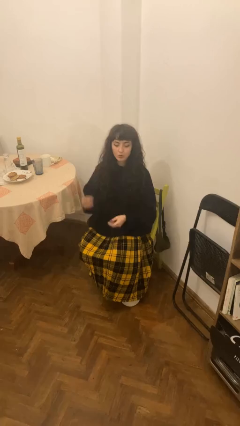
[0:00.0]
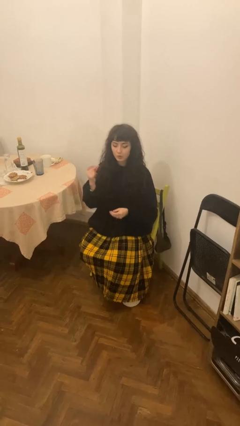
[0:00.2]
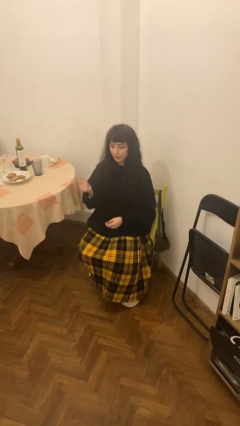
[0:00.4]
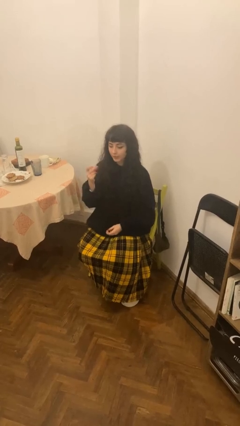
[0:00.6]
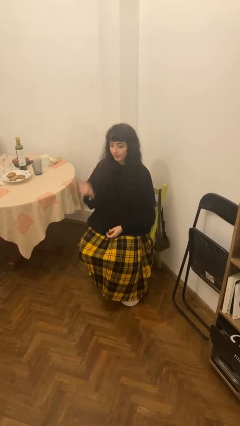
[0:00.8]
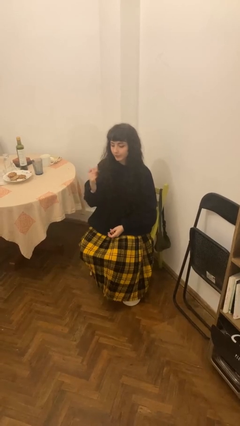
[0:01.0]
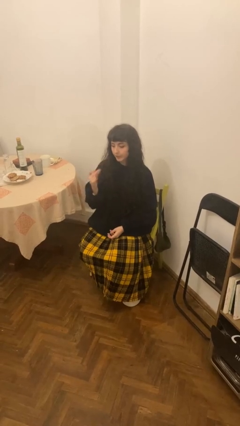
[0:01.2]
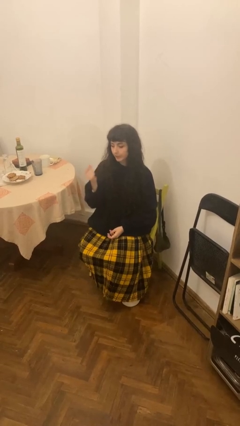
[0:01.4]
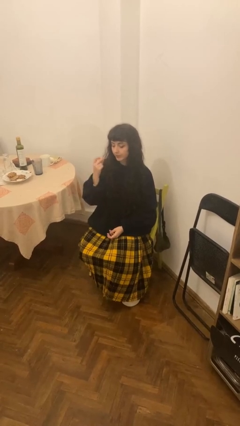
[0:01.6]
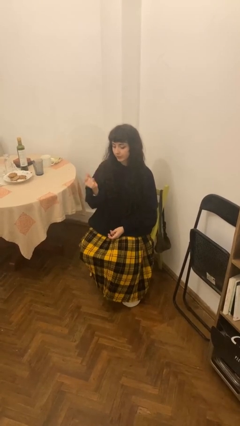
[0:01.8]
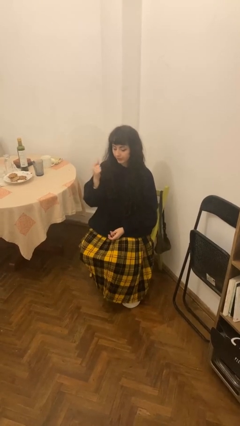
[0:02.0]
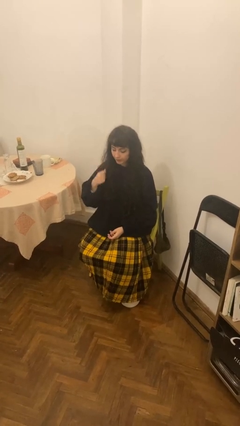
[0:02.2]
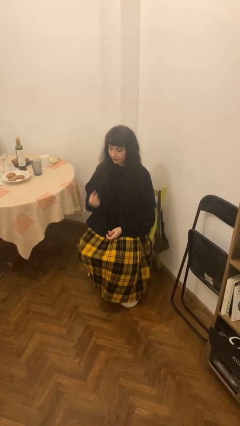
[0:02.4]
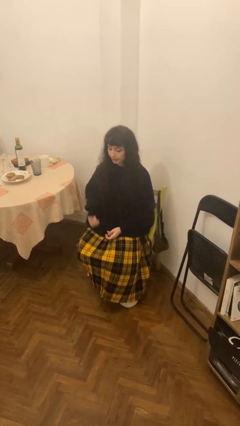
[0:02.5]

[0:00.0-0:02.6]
person snaps fingers

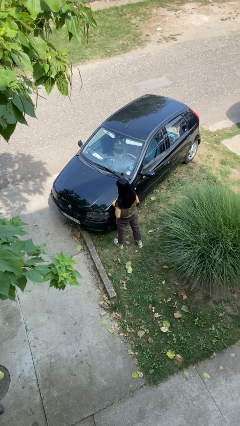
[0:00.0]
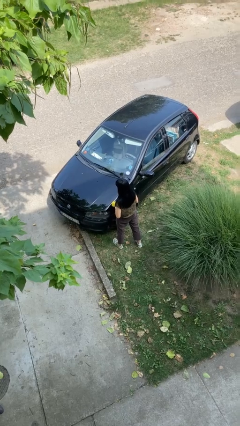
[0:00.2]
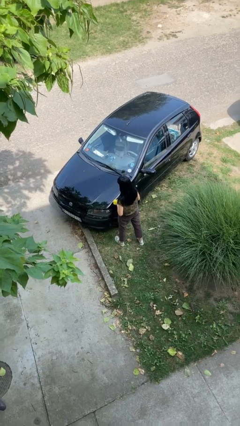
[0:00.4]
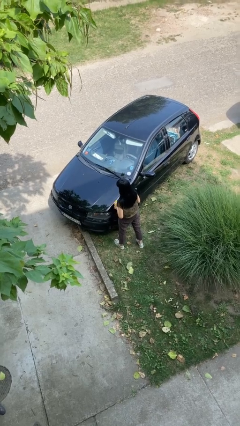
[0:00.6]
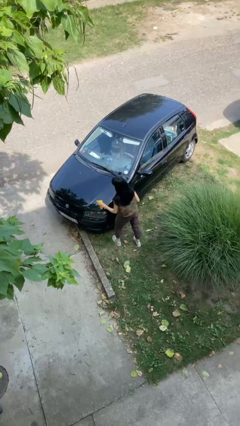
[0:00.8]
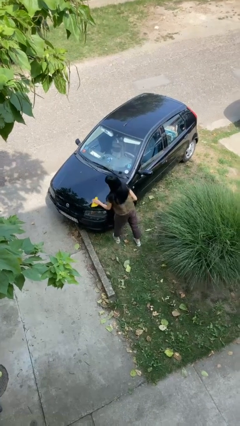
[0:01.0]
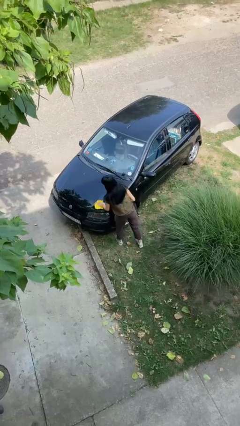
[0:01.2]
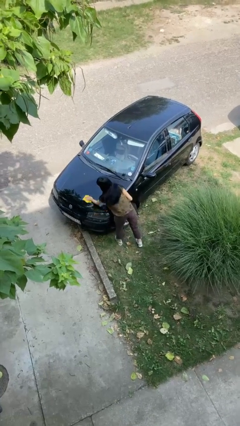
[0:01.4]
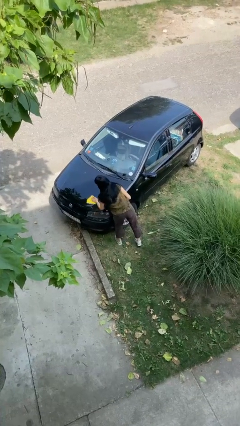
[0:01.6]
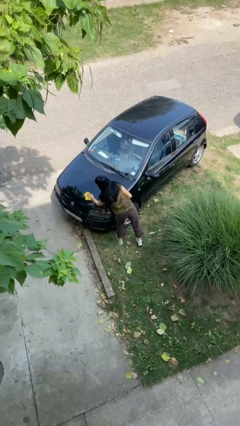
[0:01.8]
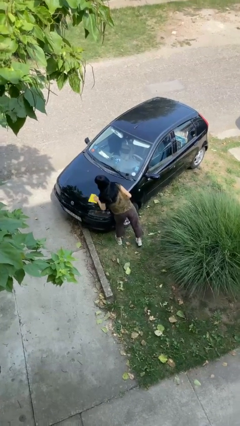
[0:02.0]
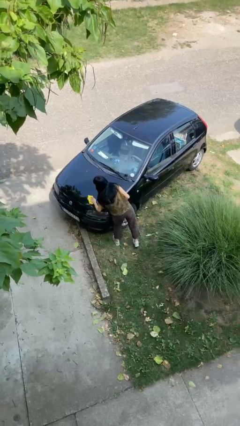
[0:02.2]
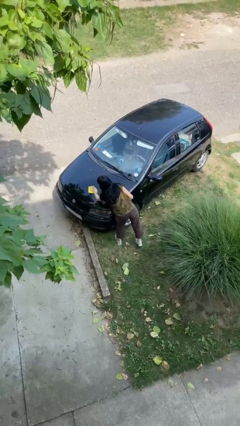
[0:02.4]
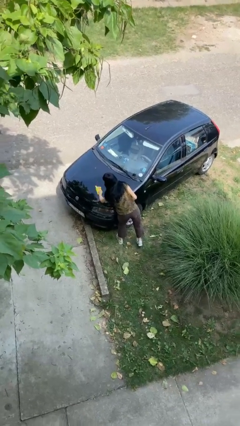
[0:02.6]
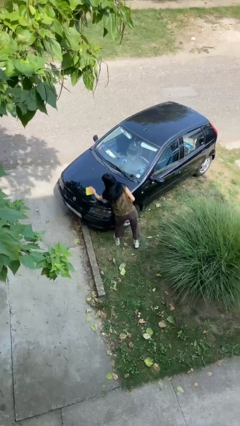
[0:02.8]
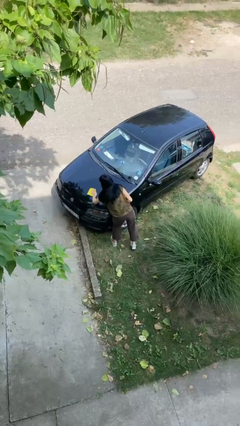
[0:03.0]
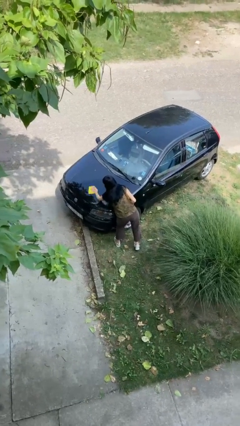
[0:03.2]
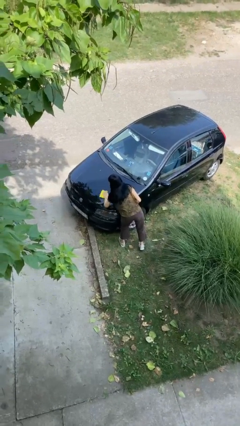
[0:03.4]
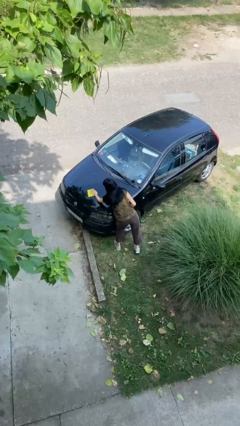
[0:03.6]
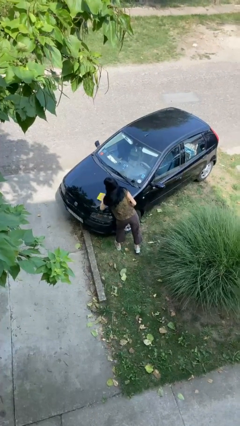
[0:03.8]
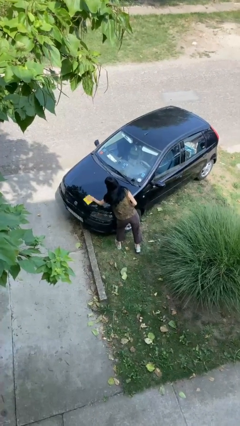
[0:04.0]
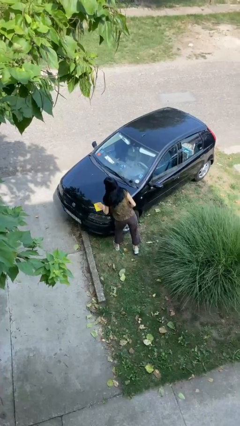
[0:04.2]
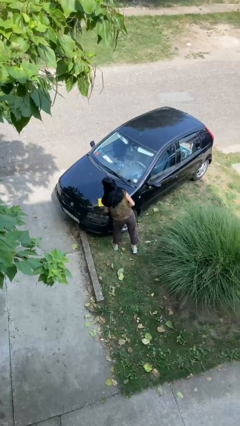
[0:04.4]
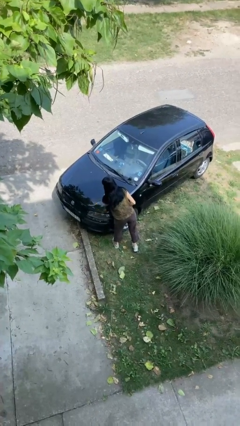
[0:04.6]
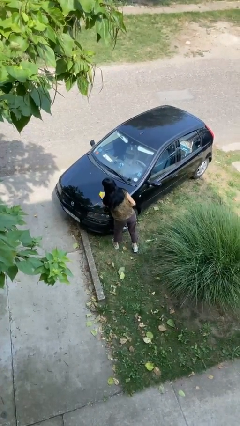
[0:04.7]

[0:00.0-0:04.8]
person polishes car with rag

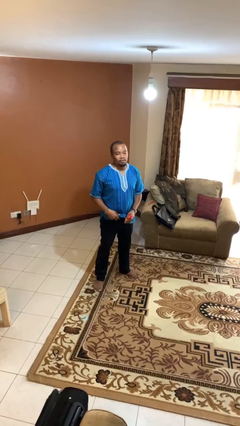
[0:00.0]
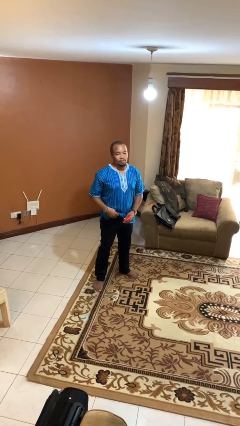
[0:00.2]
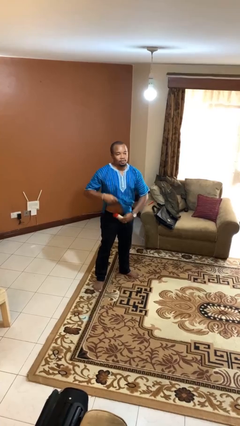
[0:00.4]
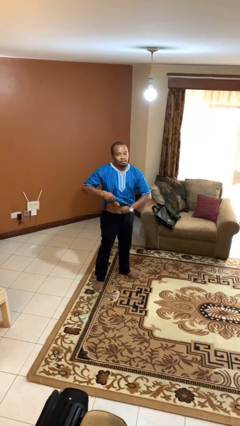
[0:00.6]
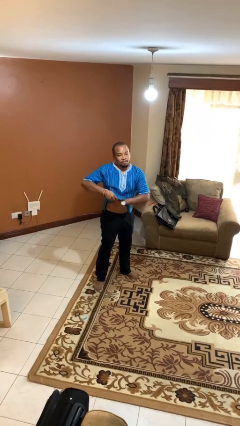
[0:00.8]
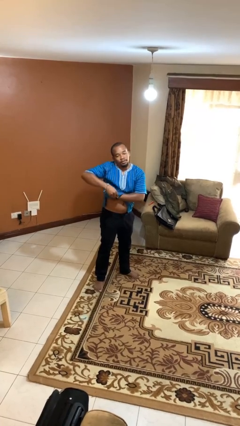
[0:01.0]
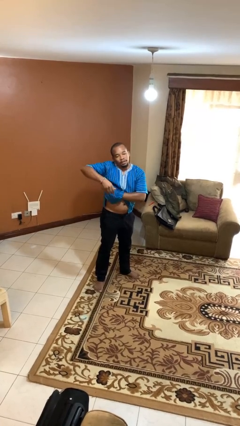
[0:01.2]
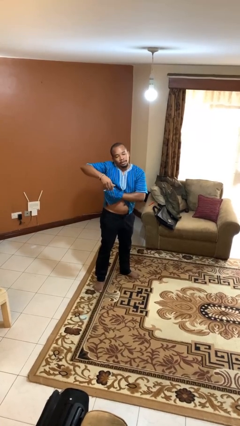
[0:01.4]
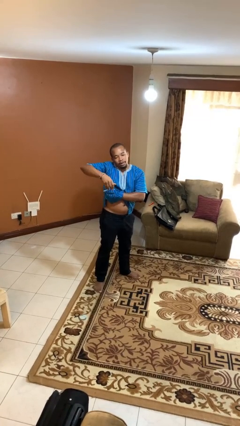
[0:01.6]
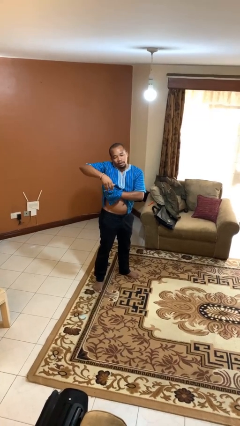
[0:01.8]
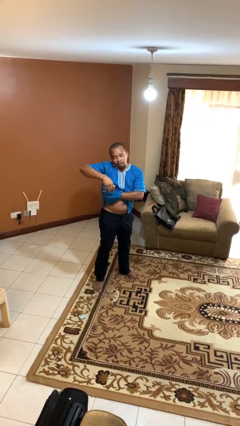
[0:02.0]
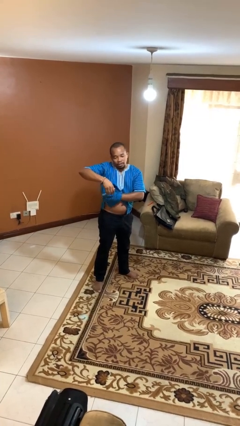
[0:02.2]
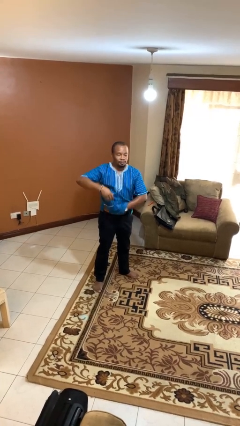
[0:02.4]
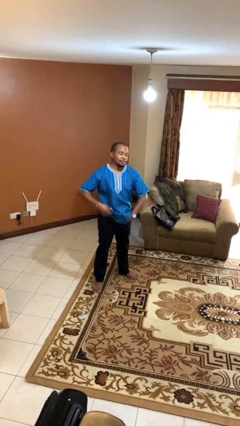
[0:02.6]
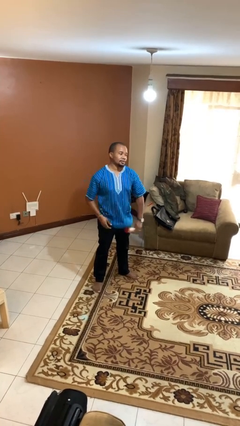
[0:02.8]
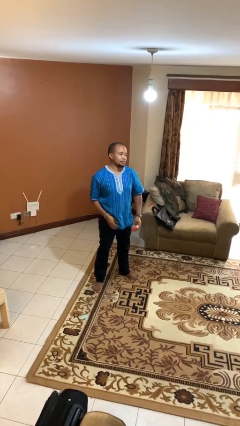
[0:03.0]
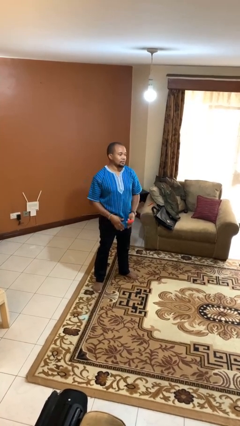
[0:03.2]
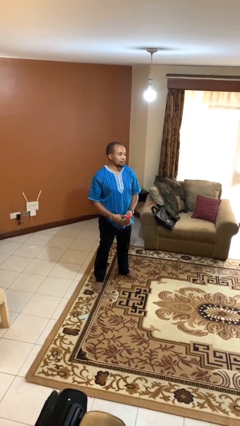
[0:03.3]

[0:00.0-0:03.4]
person applies deodorant

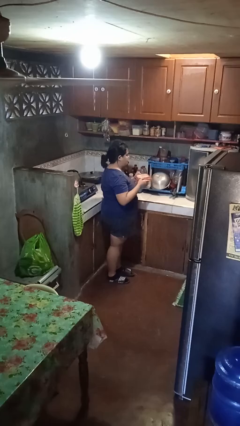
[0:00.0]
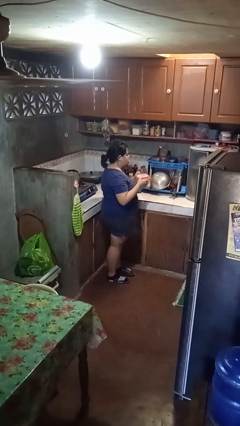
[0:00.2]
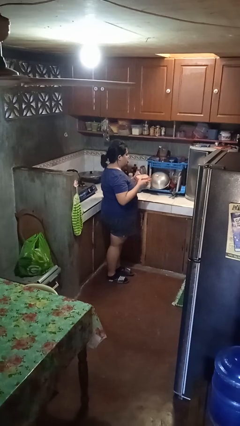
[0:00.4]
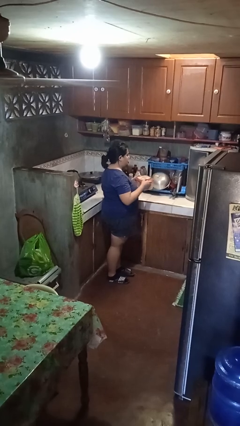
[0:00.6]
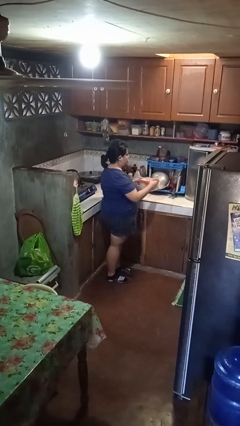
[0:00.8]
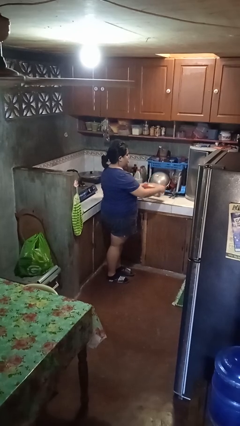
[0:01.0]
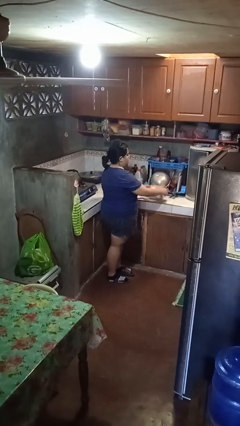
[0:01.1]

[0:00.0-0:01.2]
person puts down object on countertop

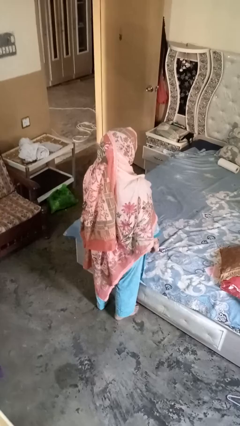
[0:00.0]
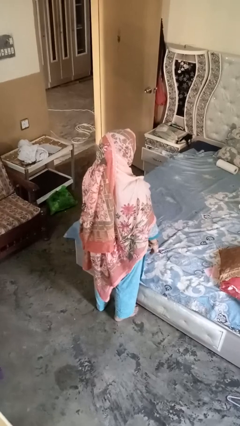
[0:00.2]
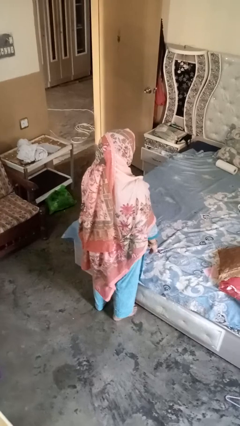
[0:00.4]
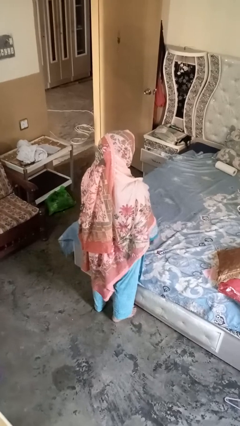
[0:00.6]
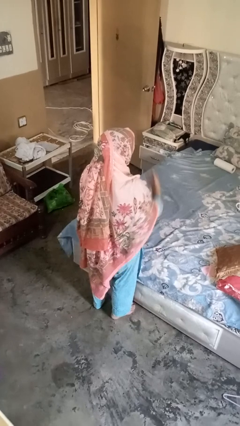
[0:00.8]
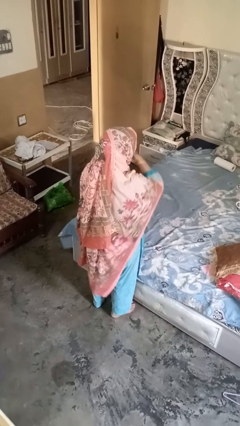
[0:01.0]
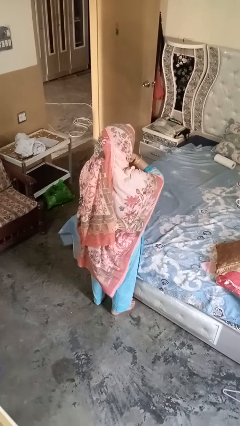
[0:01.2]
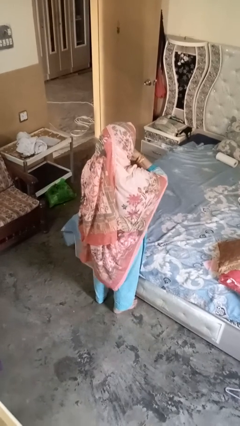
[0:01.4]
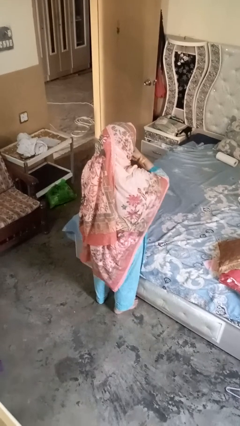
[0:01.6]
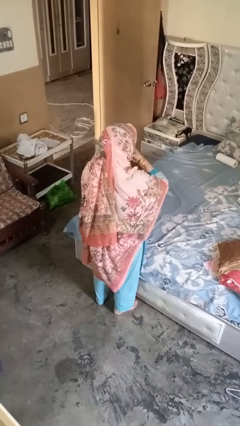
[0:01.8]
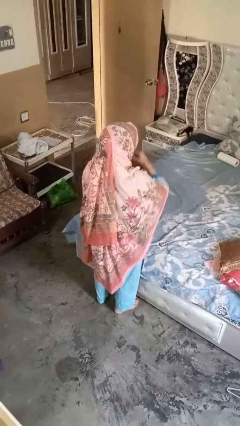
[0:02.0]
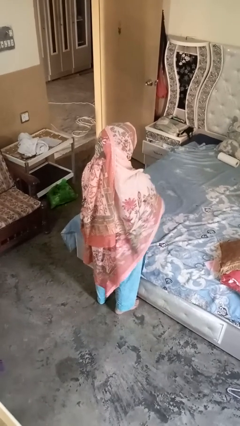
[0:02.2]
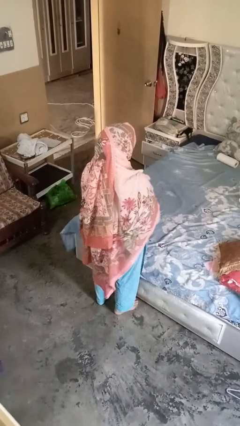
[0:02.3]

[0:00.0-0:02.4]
person strokes chin

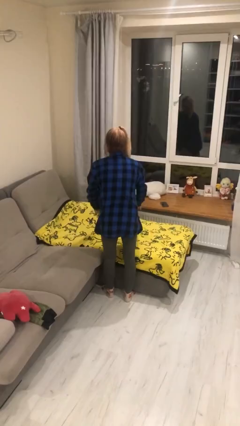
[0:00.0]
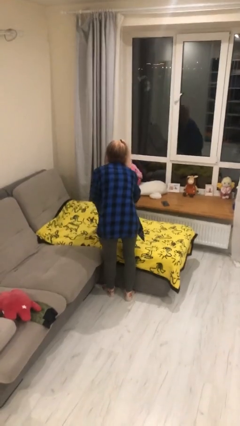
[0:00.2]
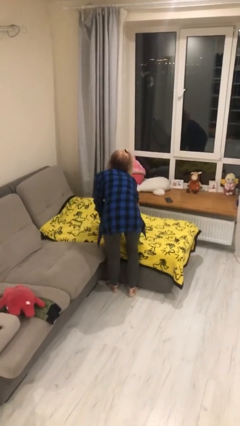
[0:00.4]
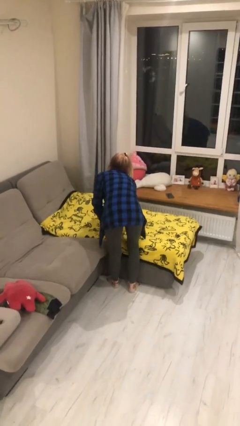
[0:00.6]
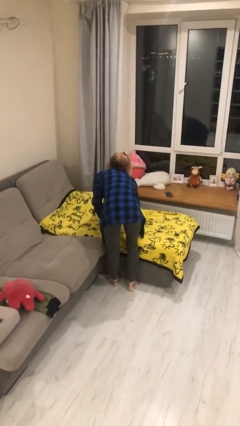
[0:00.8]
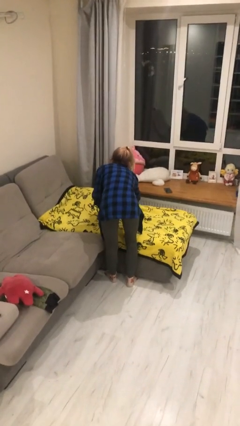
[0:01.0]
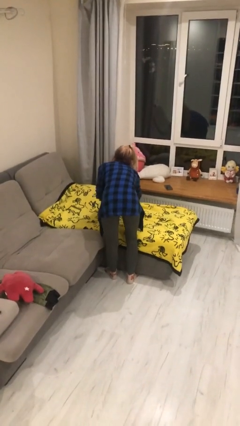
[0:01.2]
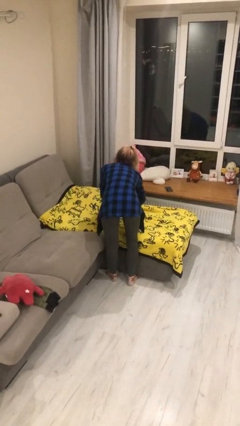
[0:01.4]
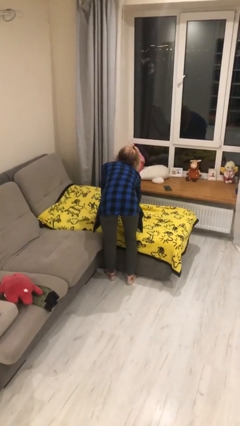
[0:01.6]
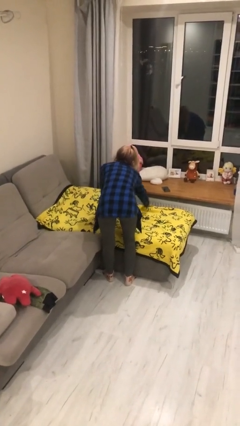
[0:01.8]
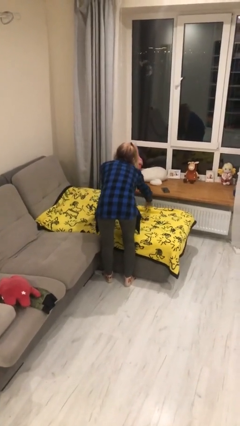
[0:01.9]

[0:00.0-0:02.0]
person makes bed

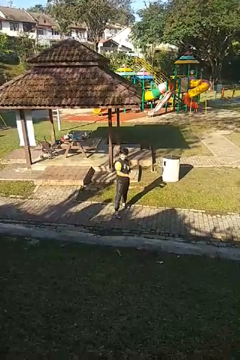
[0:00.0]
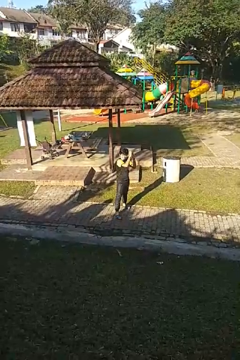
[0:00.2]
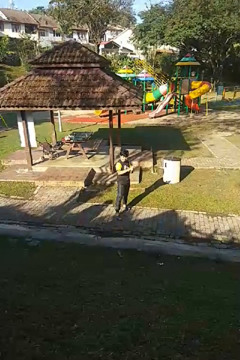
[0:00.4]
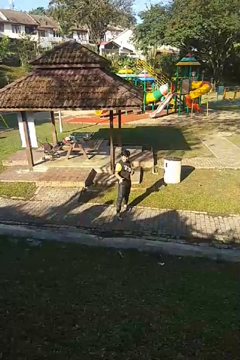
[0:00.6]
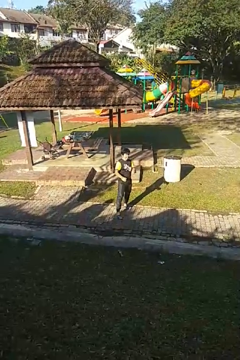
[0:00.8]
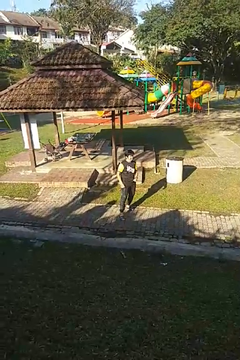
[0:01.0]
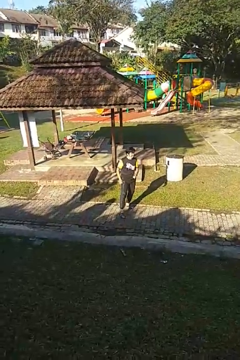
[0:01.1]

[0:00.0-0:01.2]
person karate chop
